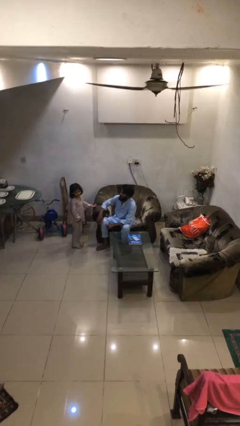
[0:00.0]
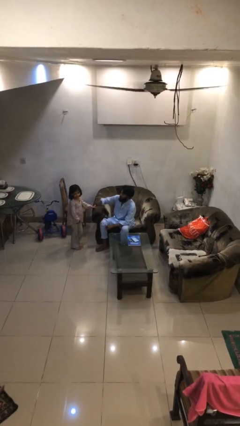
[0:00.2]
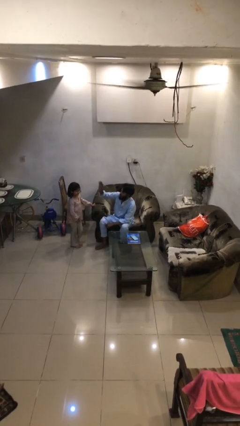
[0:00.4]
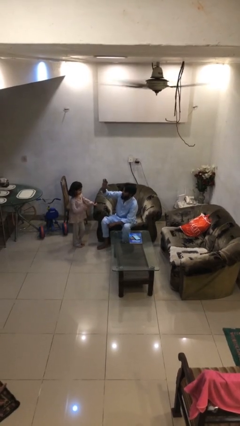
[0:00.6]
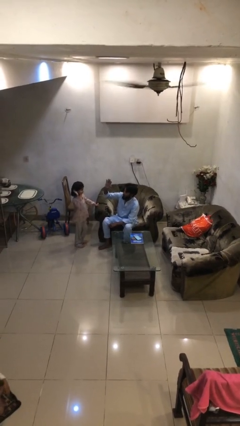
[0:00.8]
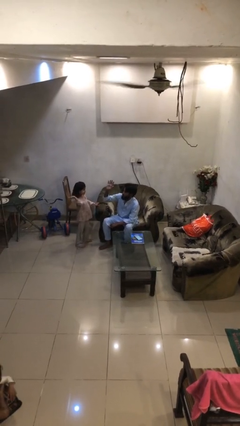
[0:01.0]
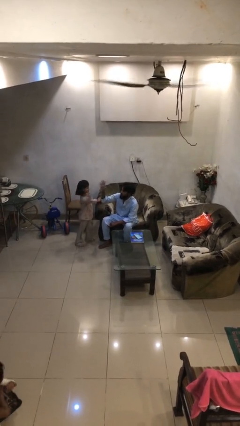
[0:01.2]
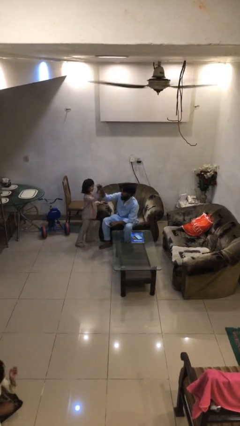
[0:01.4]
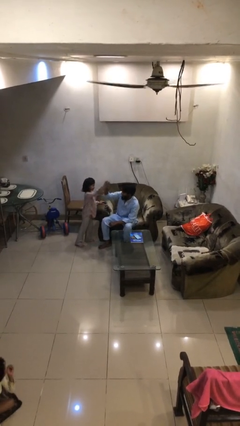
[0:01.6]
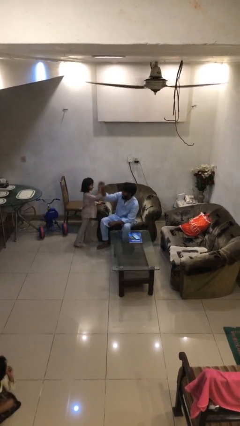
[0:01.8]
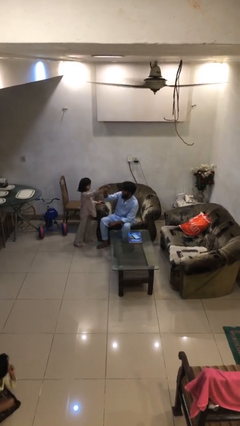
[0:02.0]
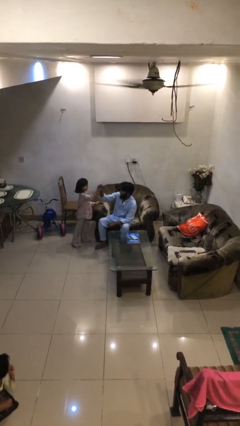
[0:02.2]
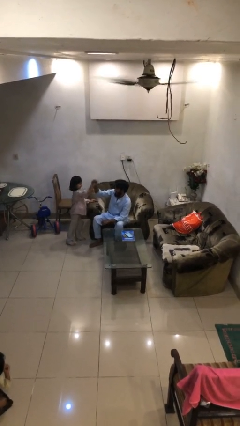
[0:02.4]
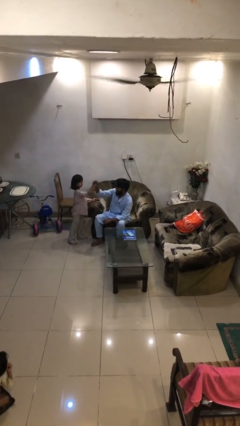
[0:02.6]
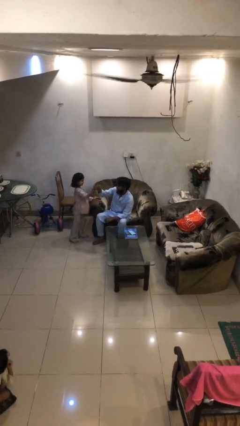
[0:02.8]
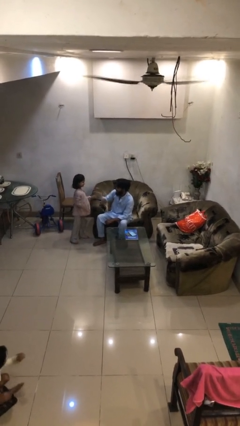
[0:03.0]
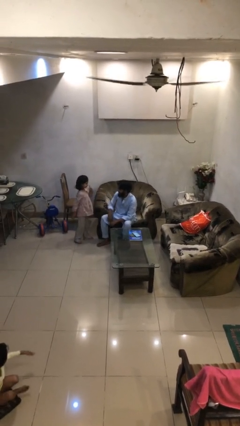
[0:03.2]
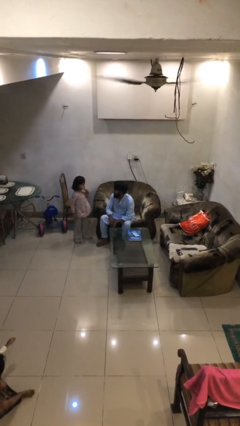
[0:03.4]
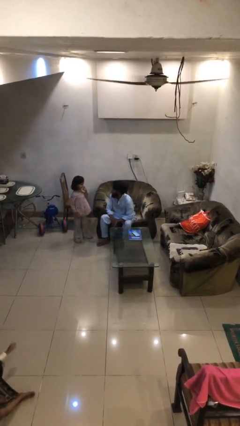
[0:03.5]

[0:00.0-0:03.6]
person highfives hand

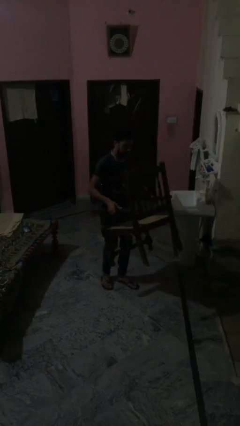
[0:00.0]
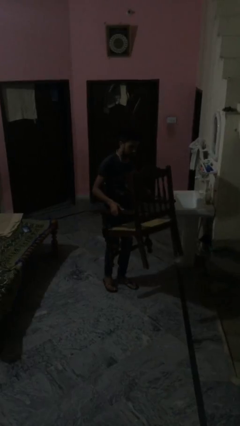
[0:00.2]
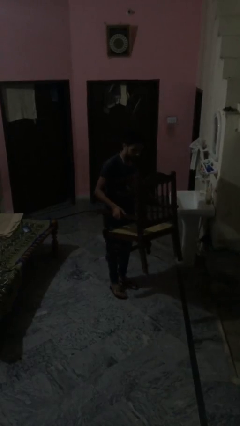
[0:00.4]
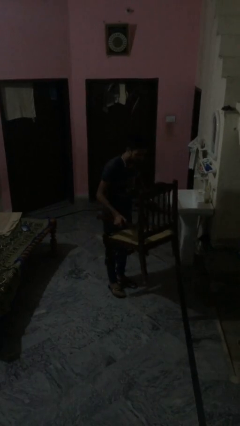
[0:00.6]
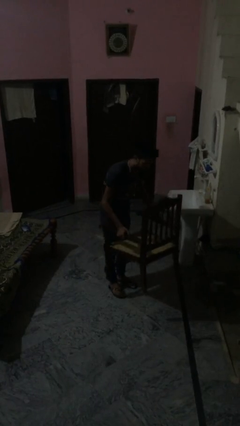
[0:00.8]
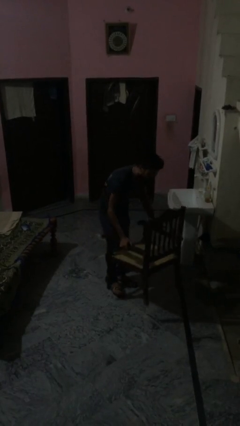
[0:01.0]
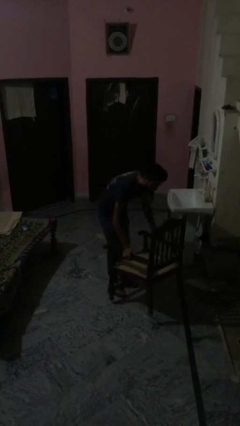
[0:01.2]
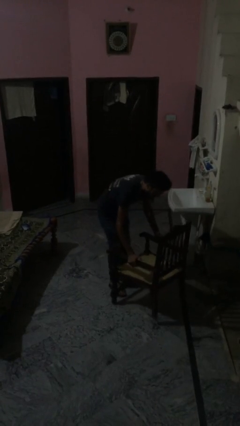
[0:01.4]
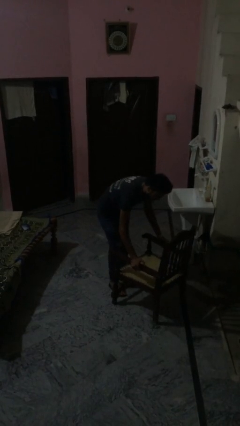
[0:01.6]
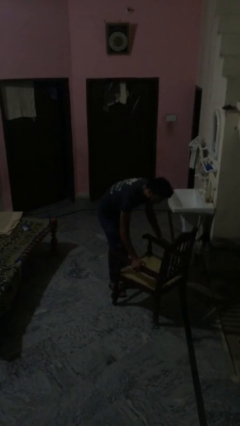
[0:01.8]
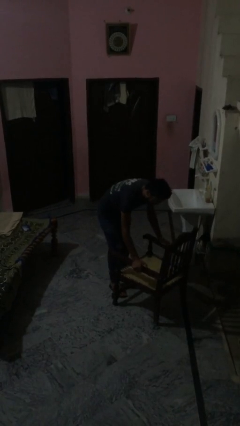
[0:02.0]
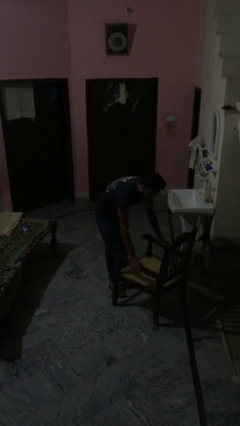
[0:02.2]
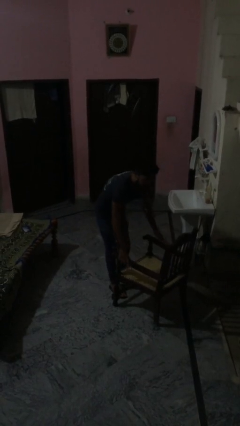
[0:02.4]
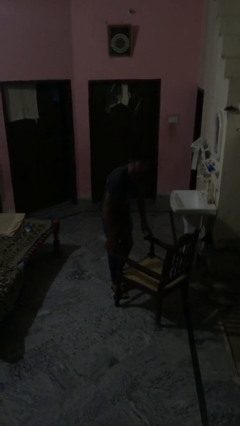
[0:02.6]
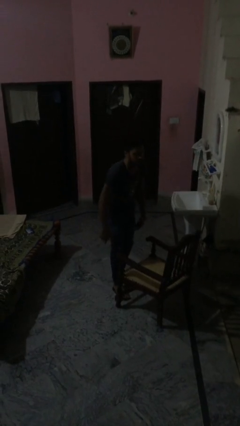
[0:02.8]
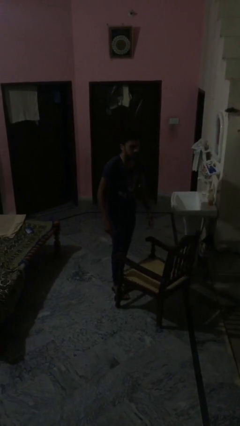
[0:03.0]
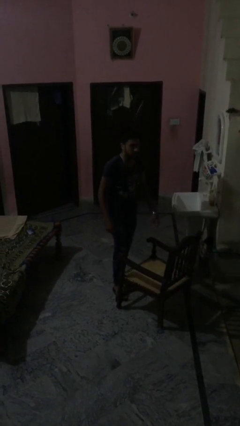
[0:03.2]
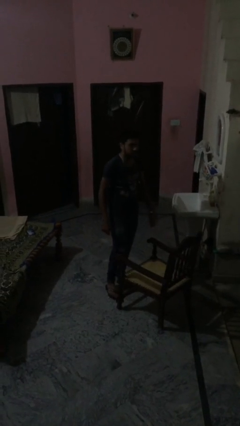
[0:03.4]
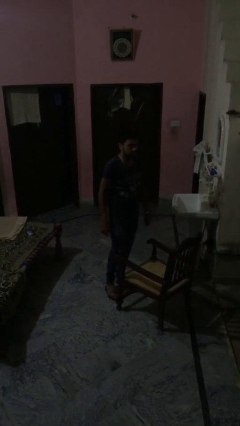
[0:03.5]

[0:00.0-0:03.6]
person puts down object on floor

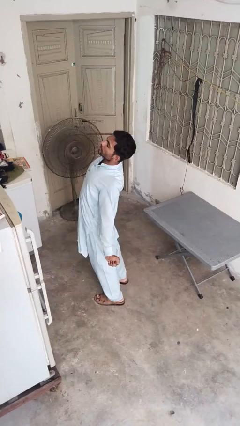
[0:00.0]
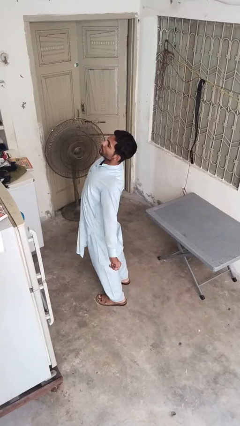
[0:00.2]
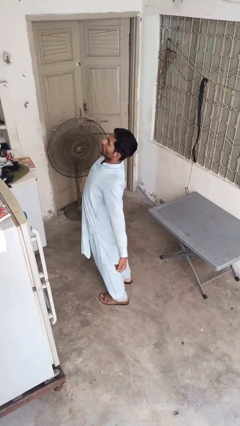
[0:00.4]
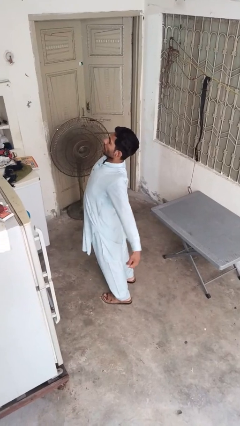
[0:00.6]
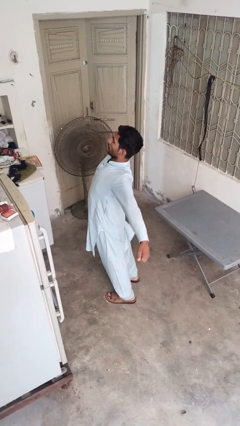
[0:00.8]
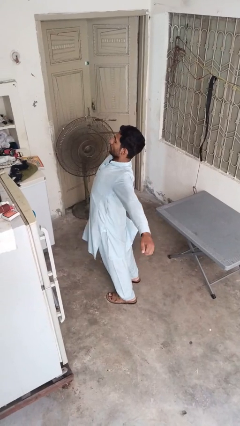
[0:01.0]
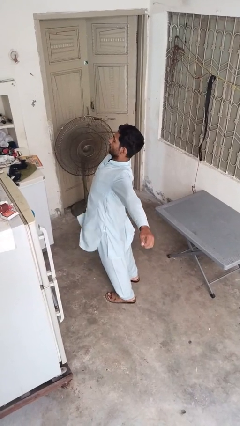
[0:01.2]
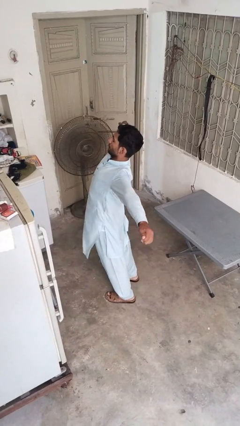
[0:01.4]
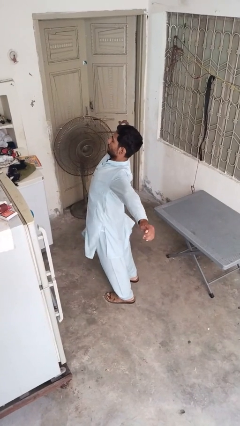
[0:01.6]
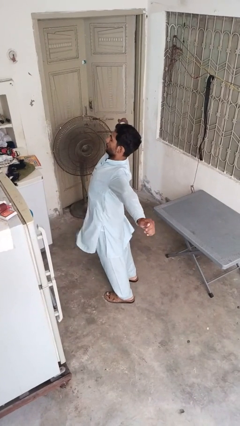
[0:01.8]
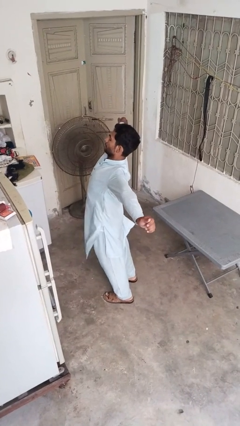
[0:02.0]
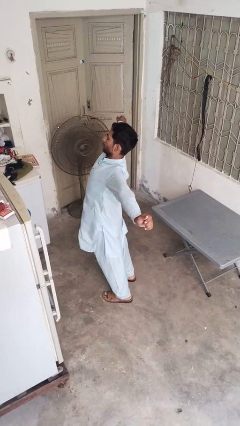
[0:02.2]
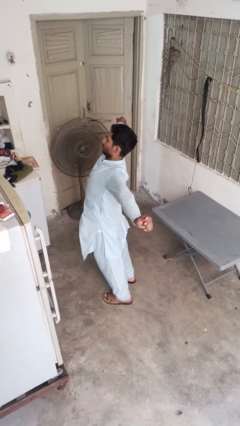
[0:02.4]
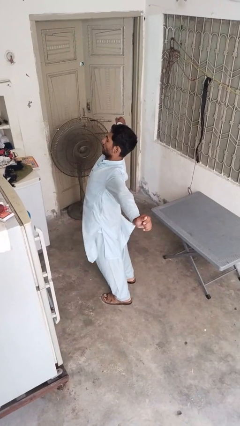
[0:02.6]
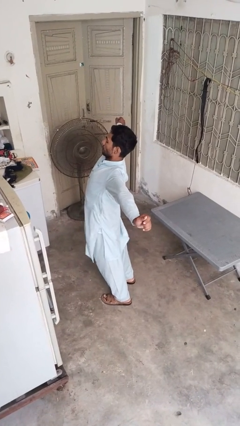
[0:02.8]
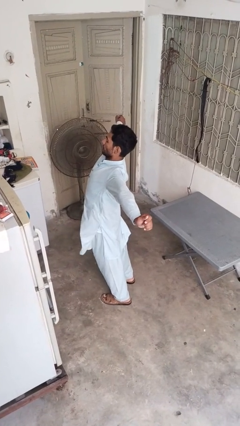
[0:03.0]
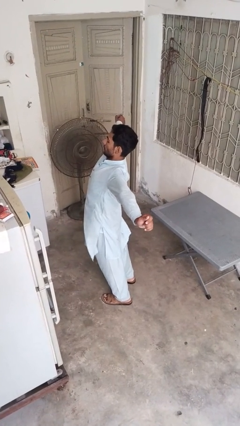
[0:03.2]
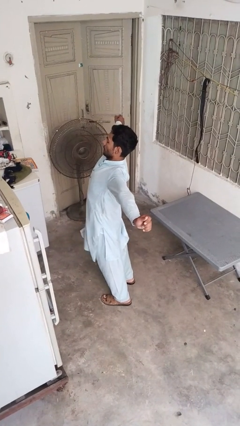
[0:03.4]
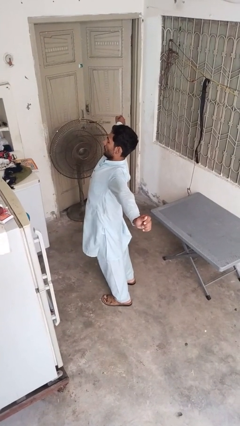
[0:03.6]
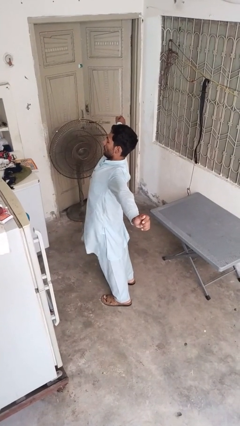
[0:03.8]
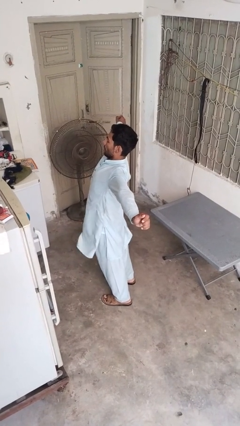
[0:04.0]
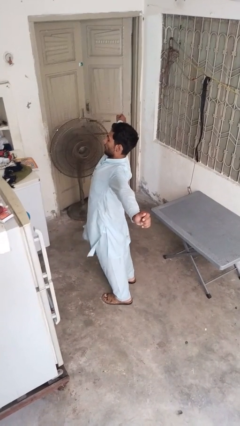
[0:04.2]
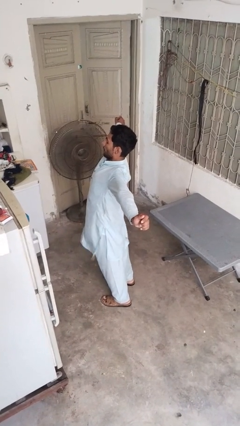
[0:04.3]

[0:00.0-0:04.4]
person stretches arms to side

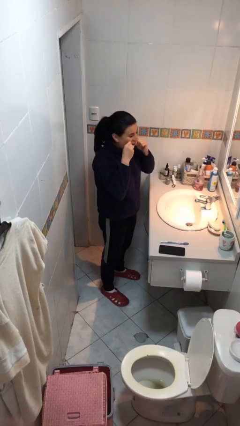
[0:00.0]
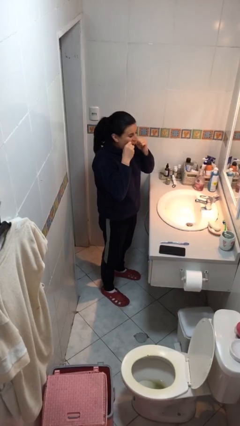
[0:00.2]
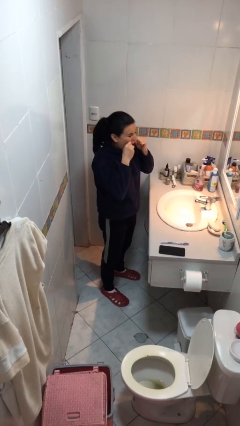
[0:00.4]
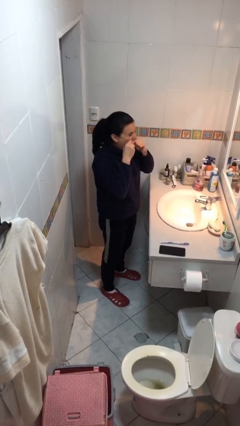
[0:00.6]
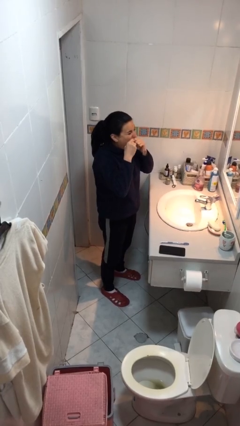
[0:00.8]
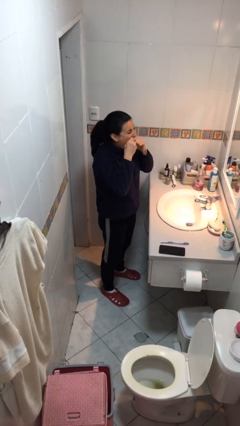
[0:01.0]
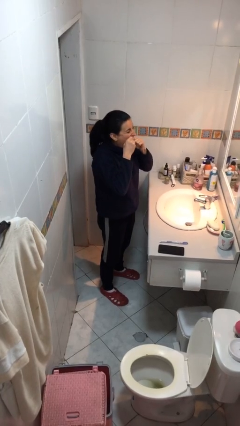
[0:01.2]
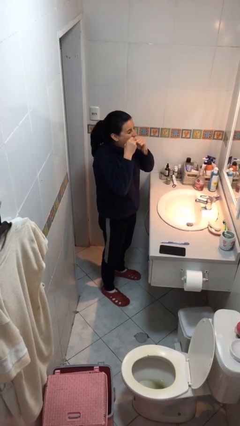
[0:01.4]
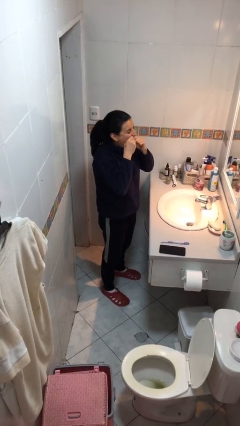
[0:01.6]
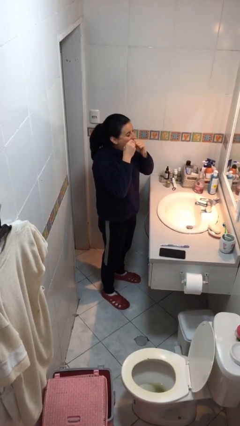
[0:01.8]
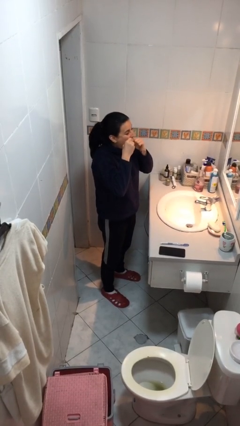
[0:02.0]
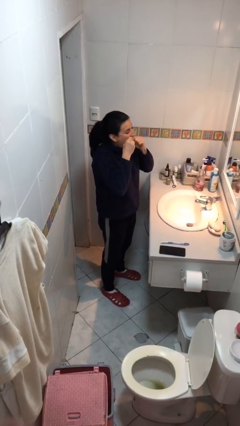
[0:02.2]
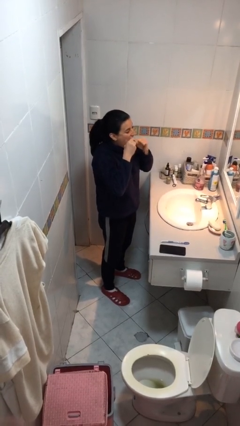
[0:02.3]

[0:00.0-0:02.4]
person flosses

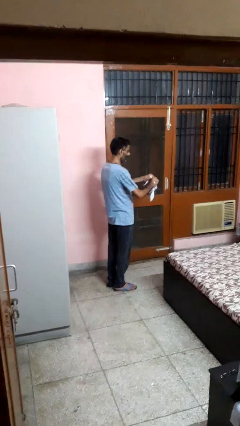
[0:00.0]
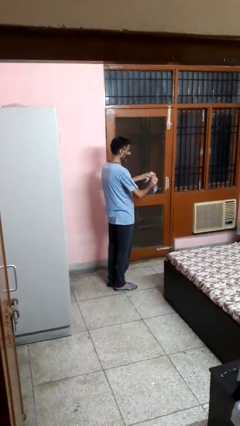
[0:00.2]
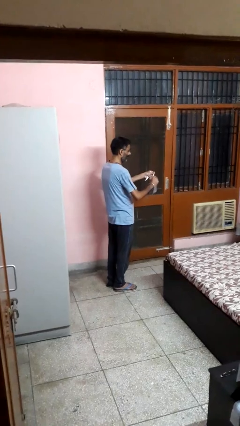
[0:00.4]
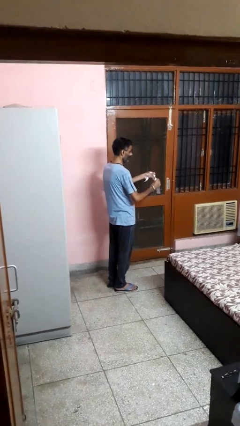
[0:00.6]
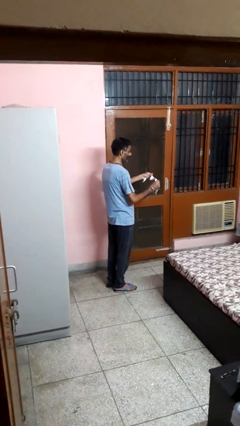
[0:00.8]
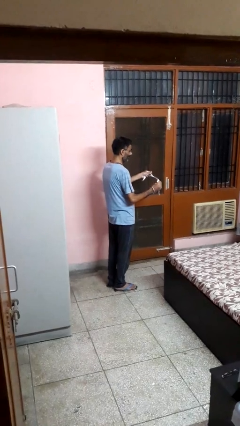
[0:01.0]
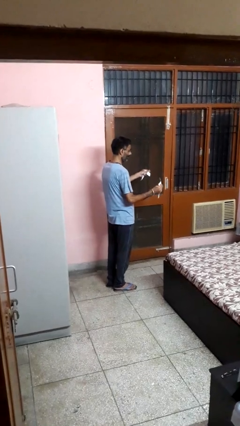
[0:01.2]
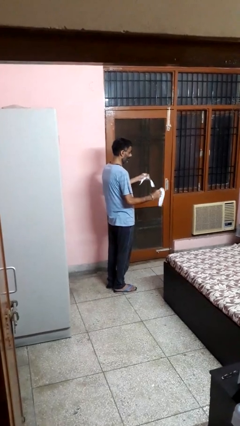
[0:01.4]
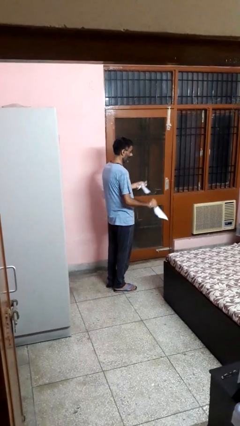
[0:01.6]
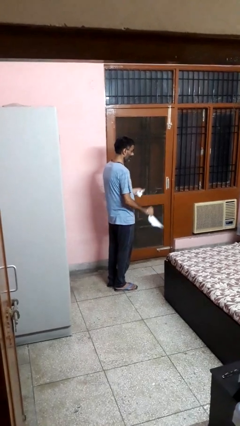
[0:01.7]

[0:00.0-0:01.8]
person tears paper

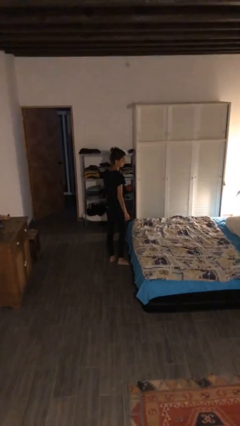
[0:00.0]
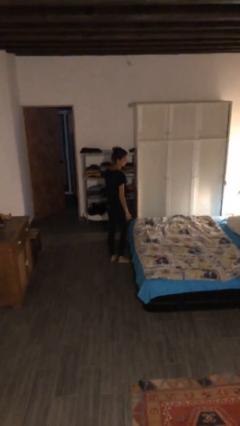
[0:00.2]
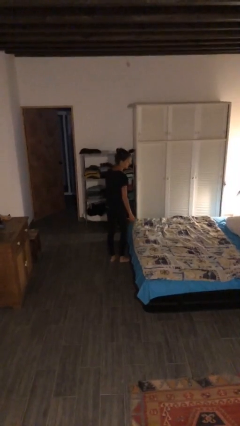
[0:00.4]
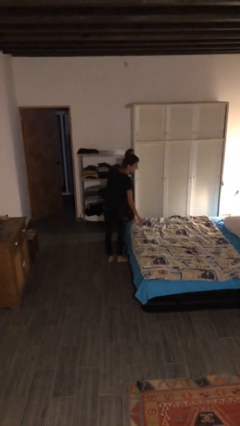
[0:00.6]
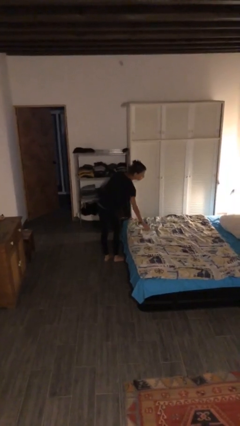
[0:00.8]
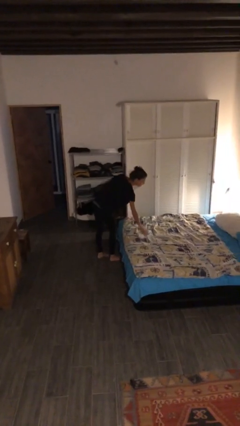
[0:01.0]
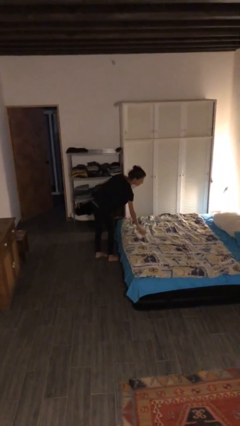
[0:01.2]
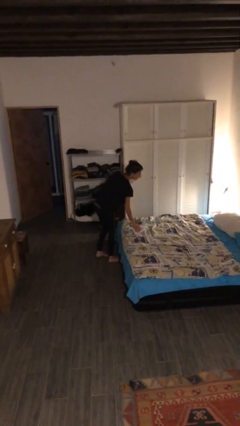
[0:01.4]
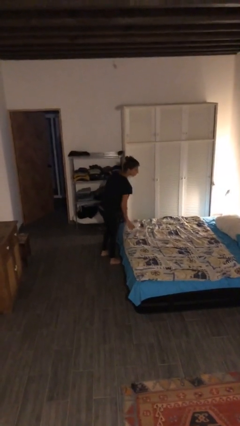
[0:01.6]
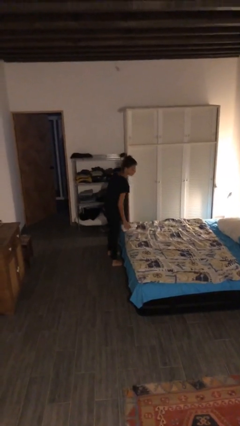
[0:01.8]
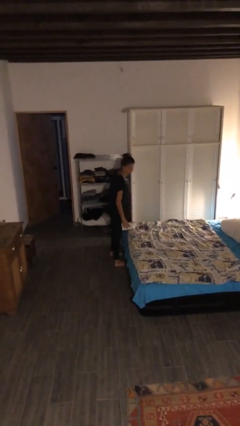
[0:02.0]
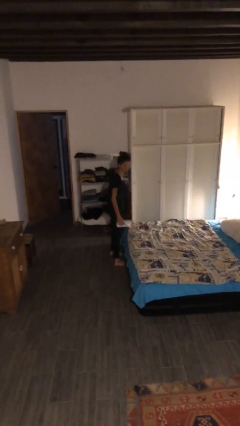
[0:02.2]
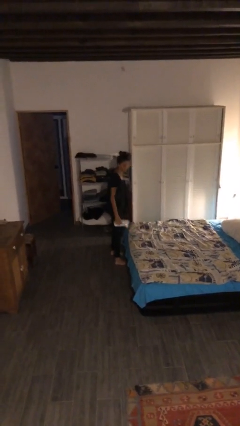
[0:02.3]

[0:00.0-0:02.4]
person picks up object from bed
